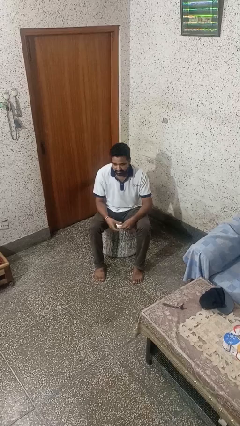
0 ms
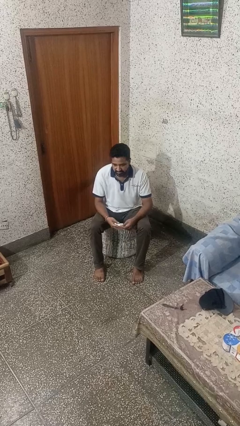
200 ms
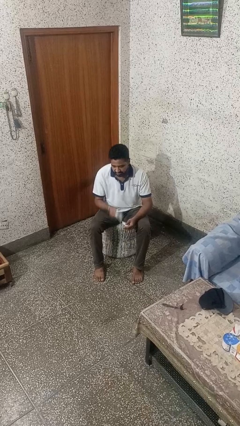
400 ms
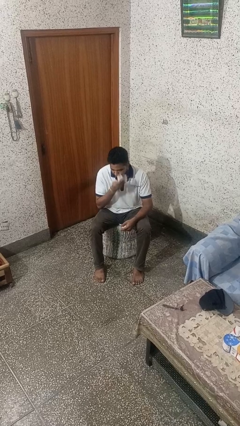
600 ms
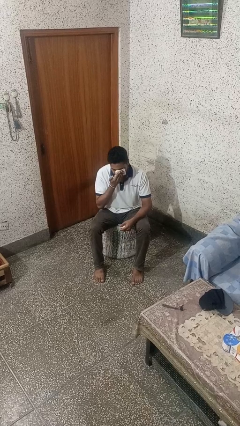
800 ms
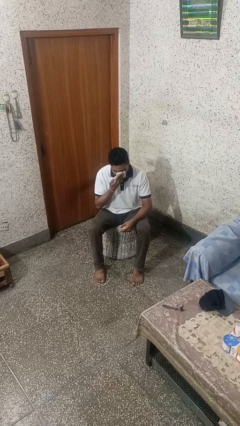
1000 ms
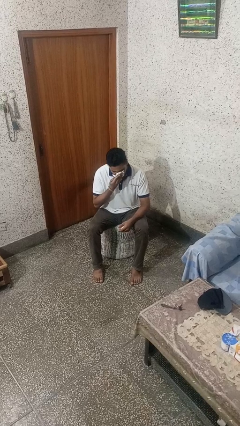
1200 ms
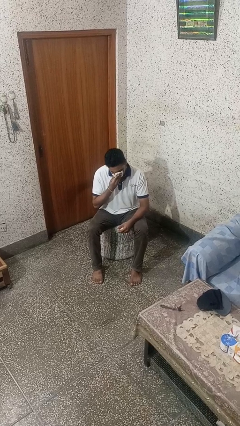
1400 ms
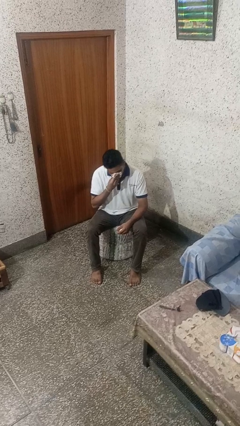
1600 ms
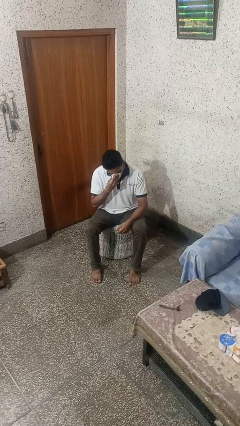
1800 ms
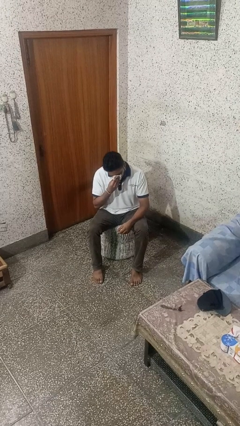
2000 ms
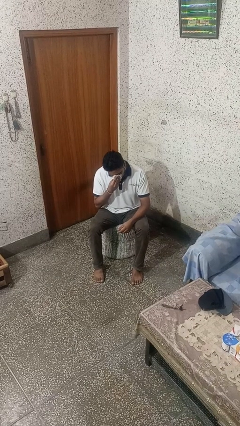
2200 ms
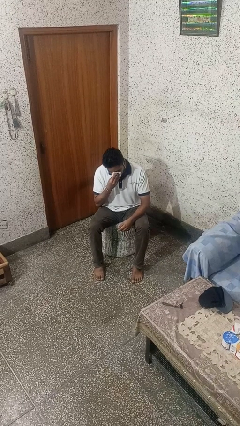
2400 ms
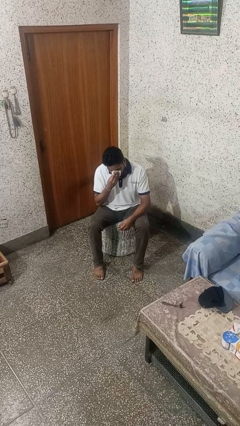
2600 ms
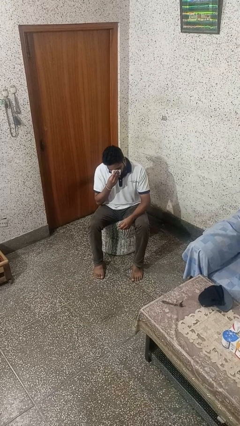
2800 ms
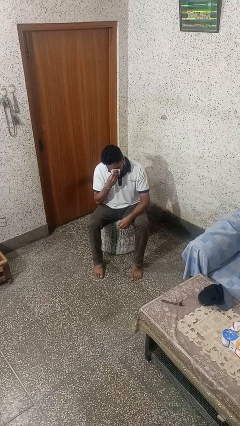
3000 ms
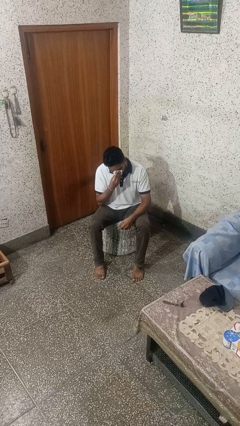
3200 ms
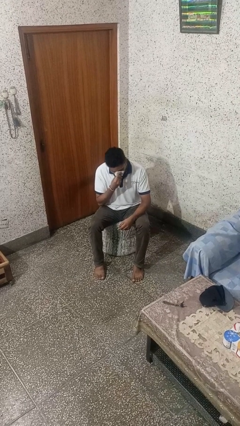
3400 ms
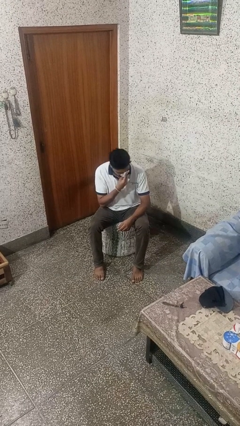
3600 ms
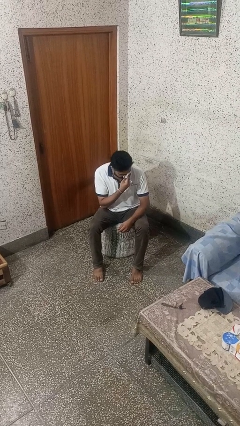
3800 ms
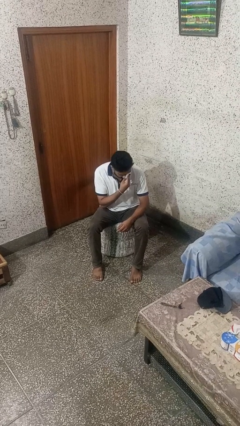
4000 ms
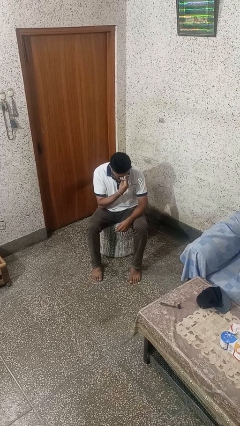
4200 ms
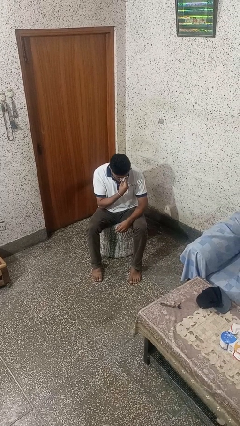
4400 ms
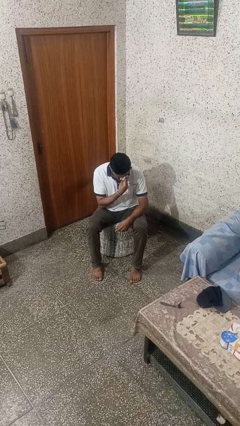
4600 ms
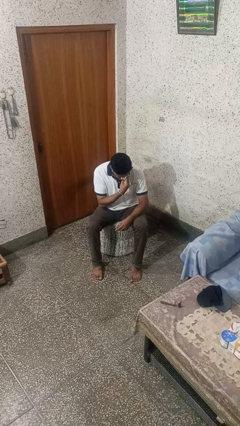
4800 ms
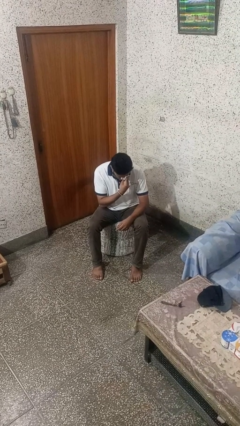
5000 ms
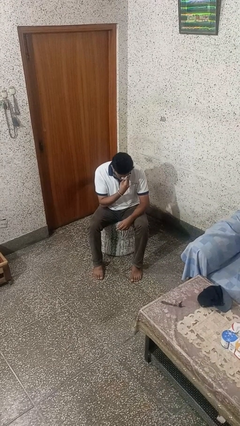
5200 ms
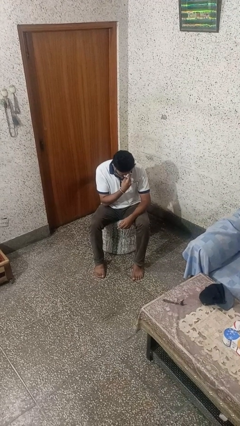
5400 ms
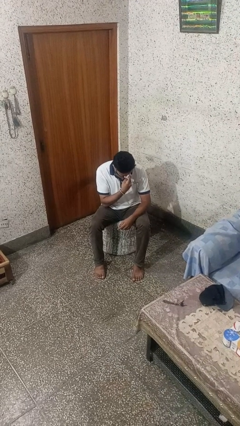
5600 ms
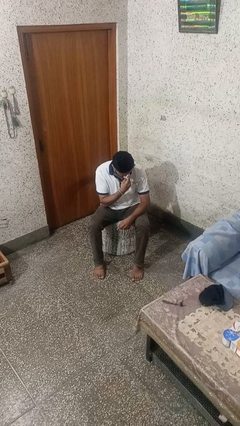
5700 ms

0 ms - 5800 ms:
person blows nose

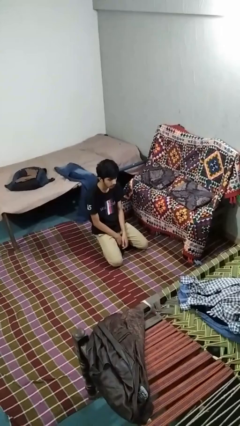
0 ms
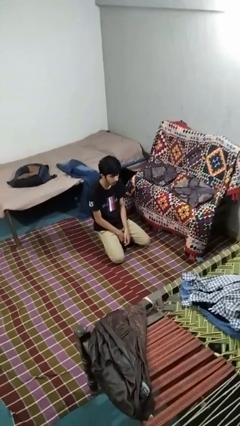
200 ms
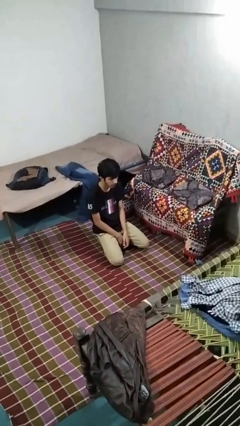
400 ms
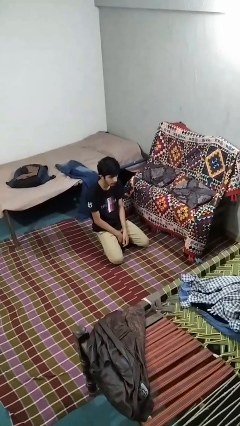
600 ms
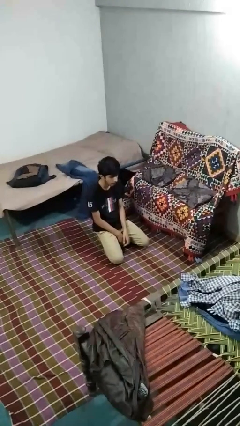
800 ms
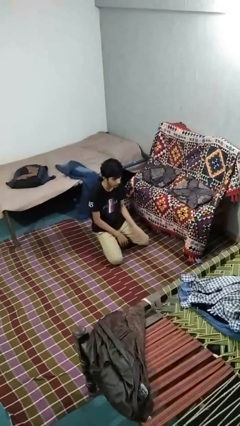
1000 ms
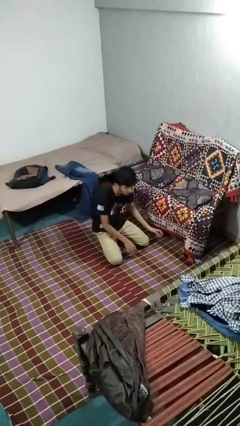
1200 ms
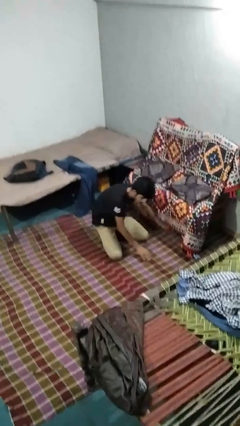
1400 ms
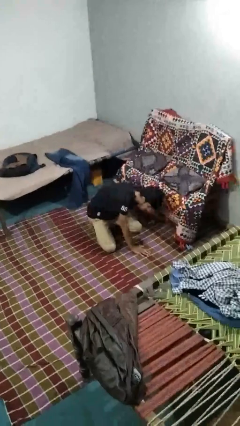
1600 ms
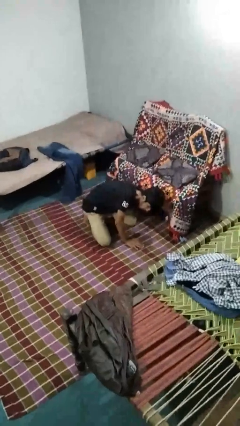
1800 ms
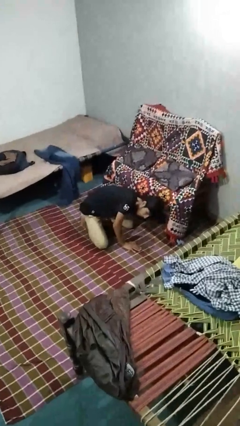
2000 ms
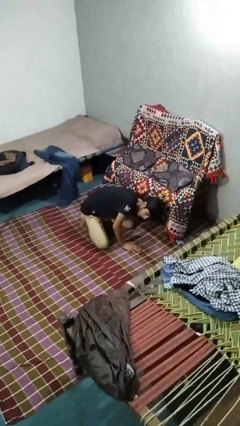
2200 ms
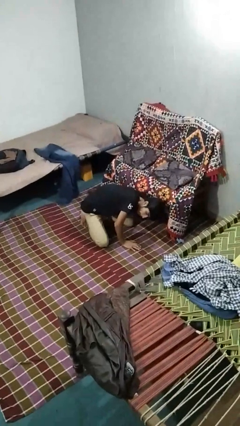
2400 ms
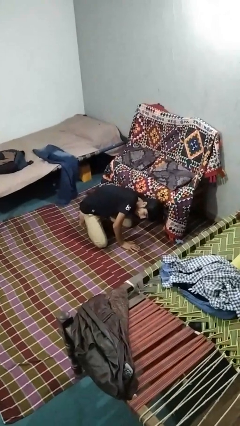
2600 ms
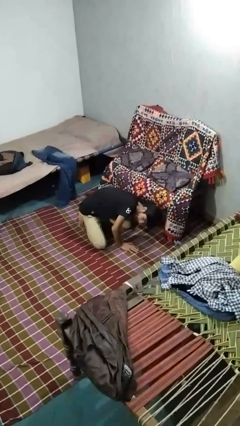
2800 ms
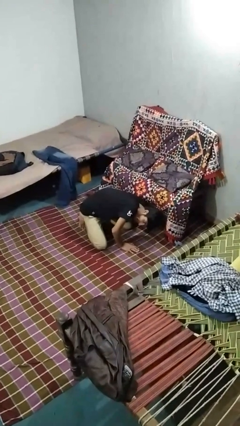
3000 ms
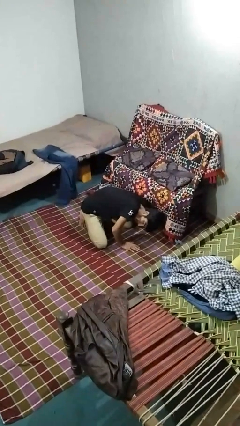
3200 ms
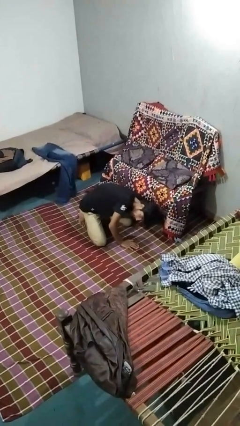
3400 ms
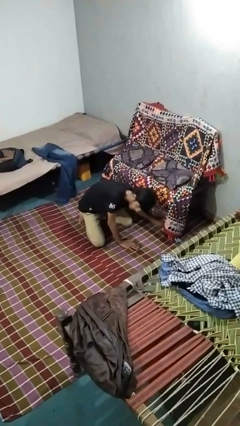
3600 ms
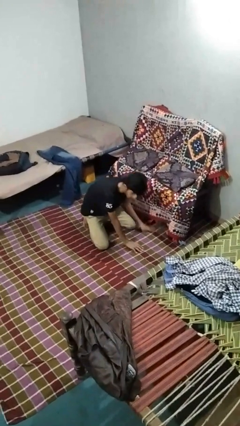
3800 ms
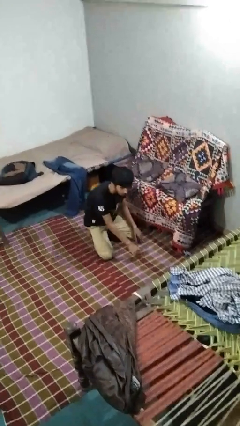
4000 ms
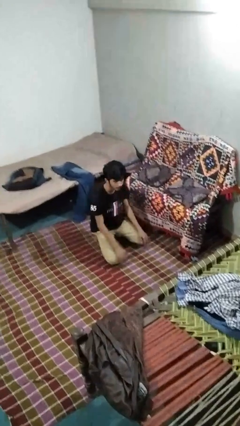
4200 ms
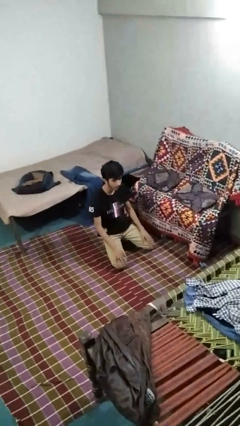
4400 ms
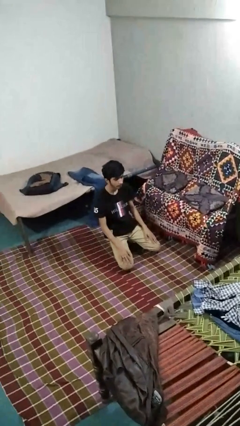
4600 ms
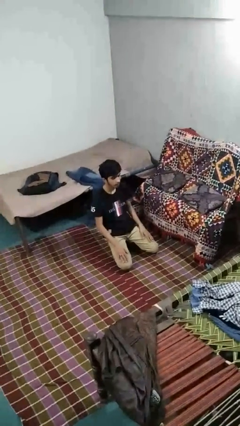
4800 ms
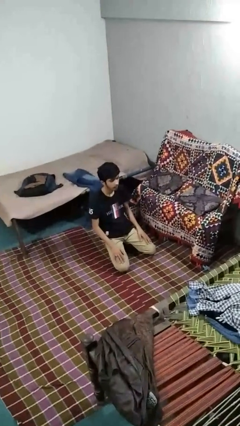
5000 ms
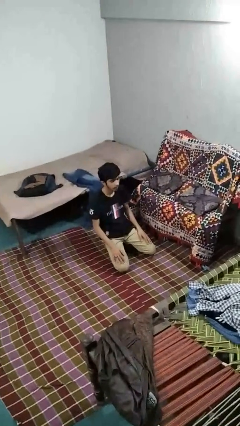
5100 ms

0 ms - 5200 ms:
person searches under couch

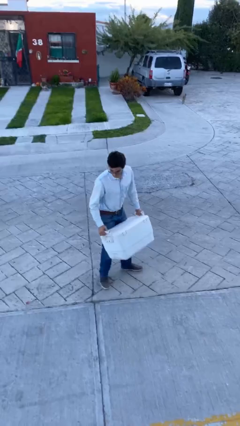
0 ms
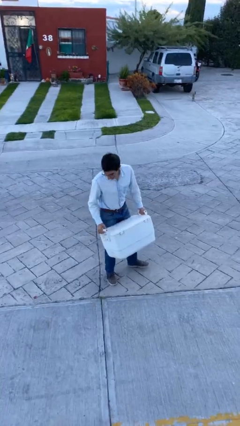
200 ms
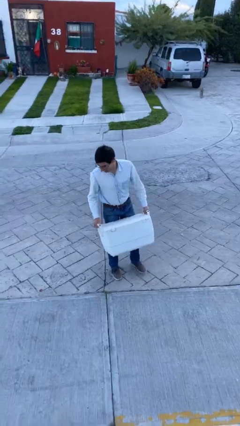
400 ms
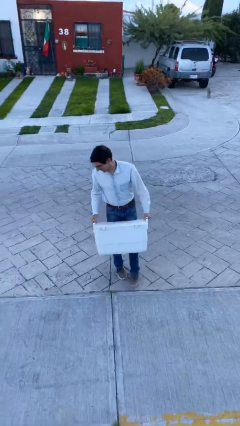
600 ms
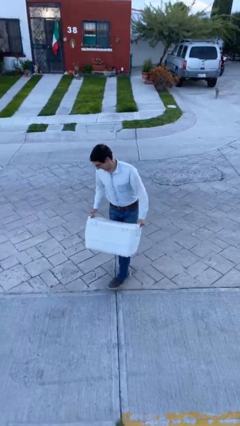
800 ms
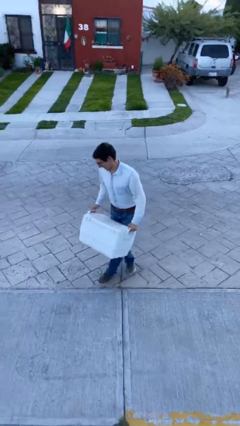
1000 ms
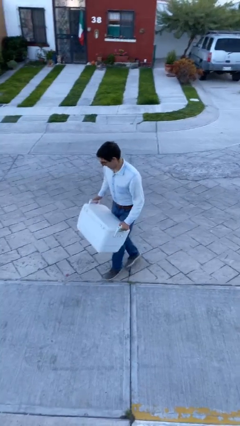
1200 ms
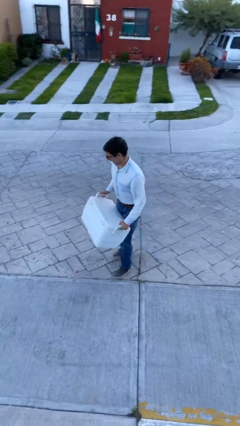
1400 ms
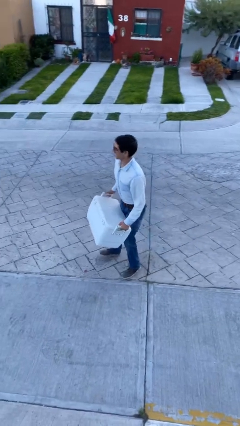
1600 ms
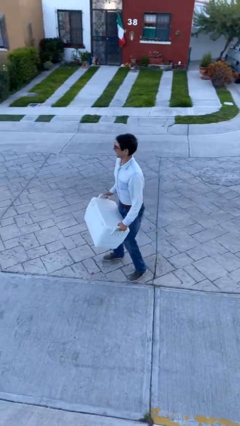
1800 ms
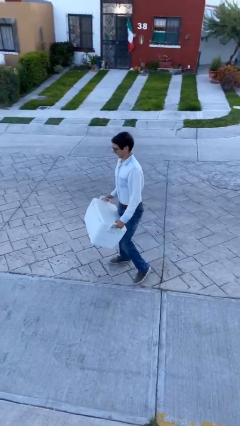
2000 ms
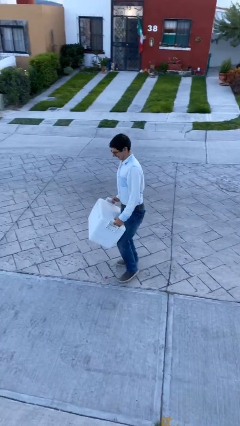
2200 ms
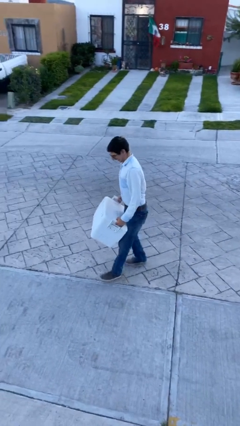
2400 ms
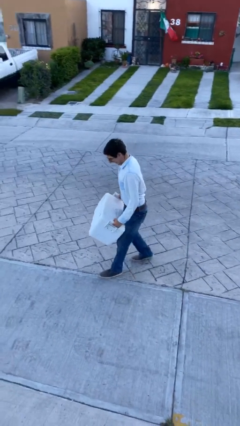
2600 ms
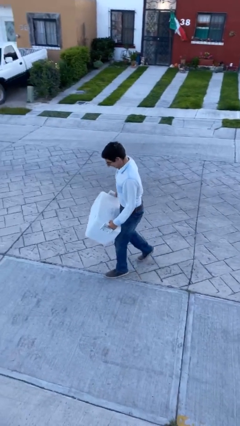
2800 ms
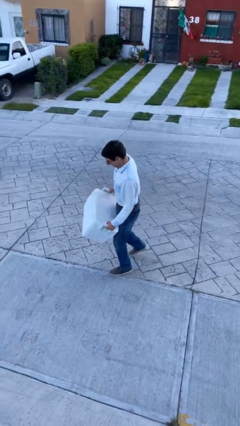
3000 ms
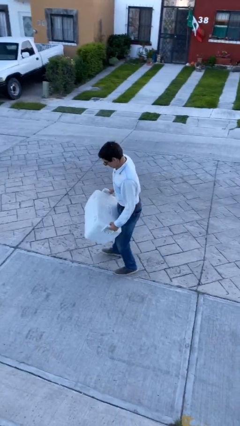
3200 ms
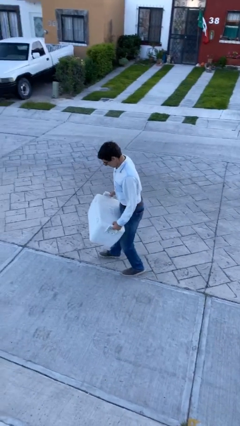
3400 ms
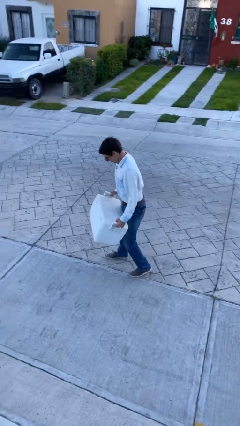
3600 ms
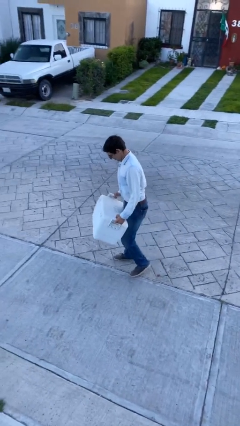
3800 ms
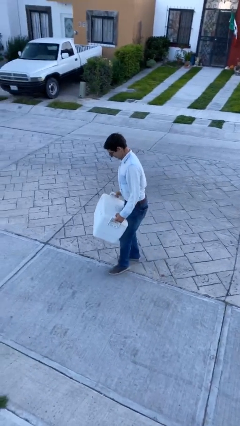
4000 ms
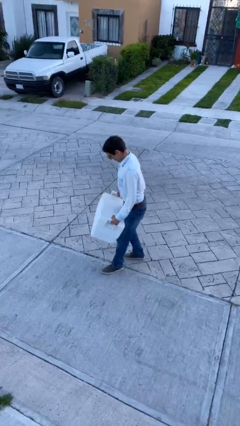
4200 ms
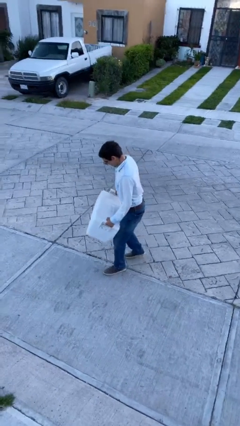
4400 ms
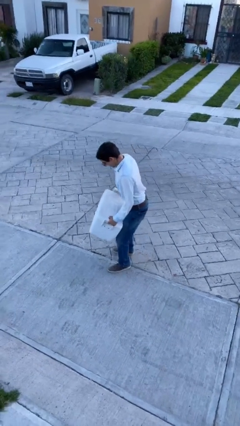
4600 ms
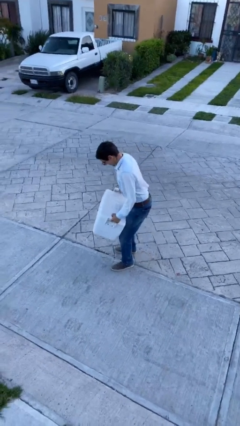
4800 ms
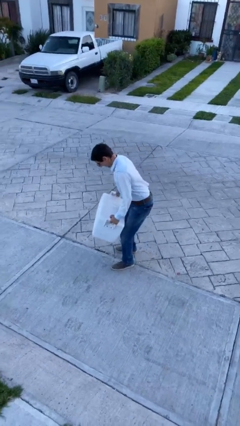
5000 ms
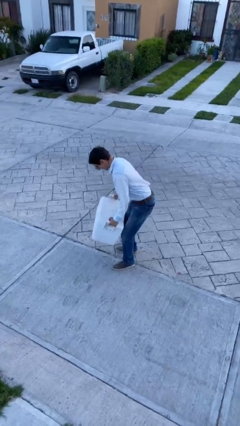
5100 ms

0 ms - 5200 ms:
person carries heavy object

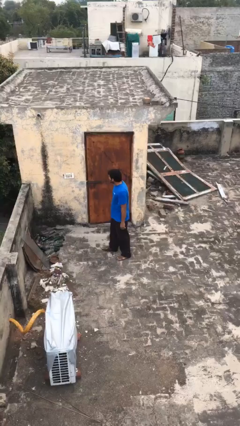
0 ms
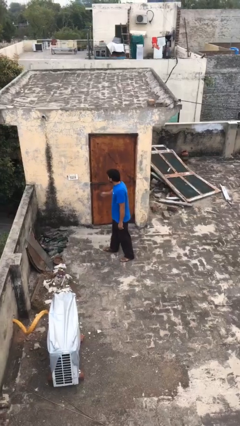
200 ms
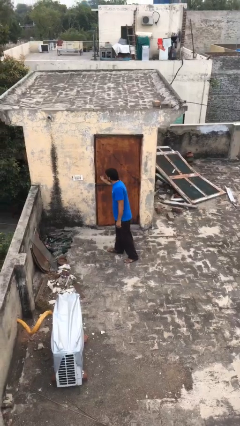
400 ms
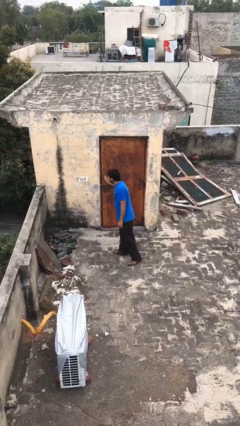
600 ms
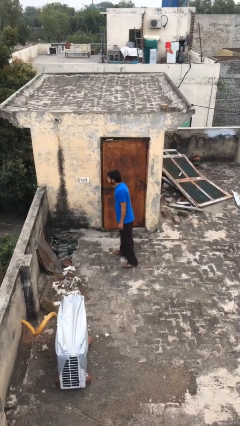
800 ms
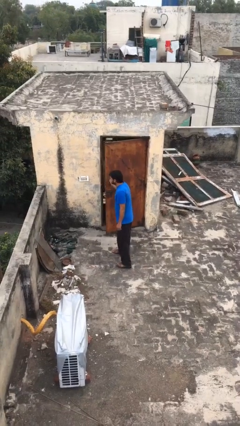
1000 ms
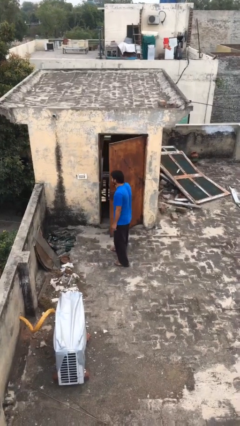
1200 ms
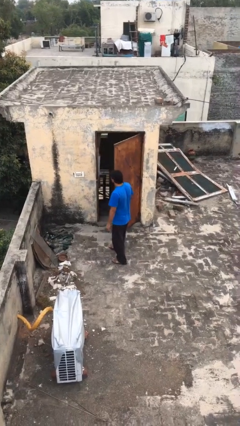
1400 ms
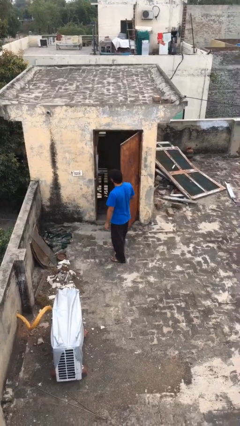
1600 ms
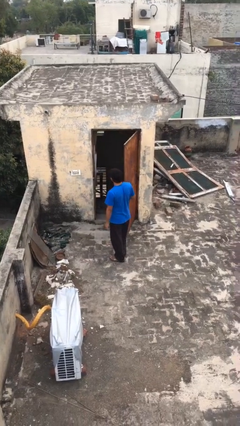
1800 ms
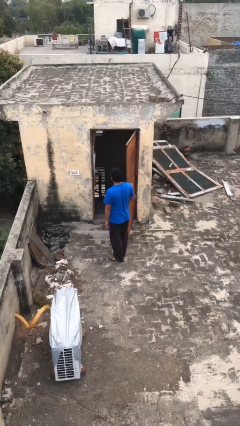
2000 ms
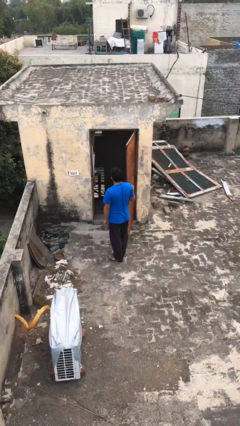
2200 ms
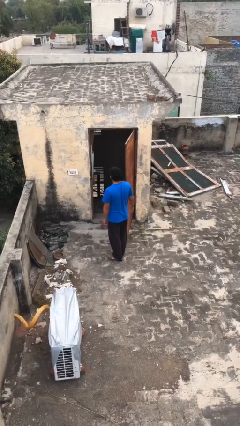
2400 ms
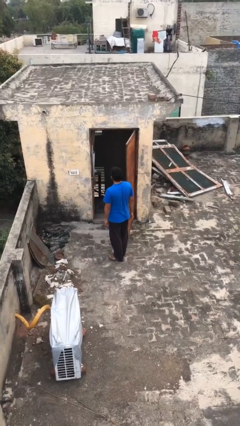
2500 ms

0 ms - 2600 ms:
person opens facility door
